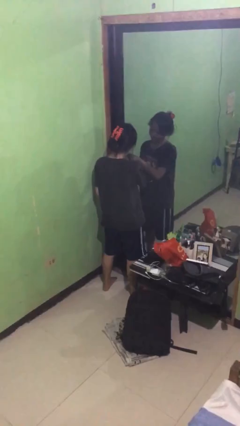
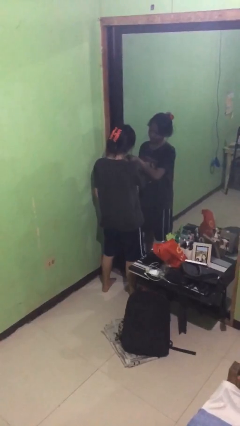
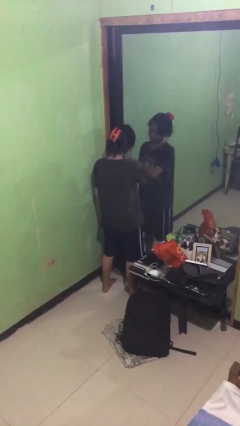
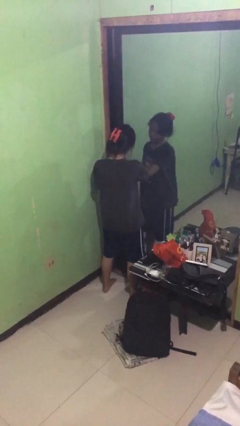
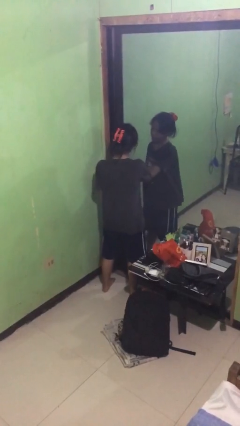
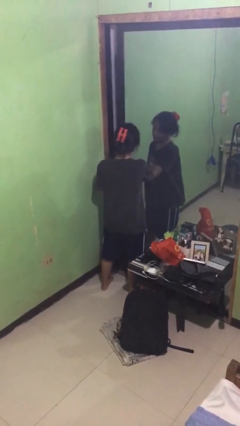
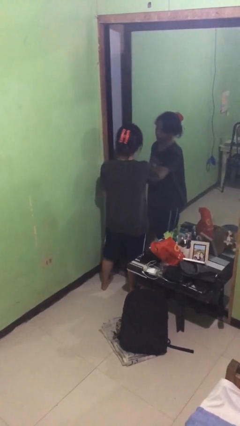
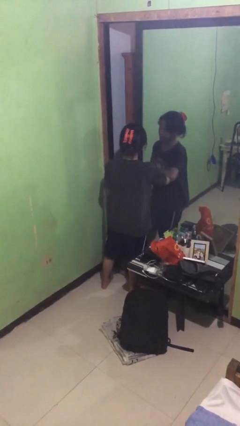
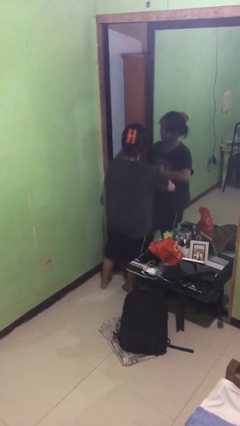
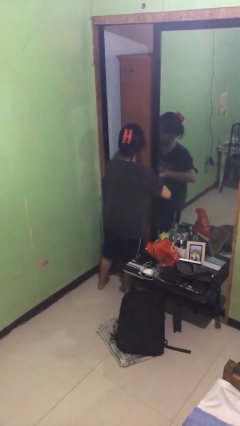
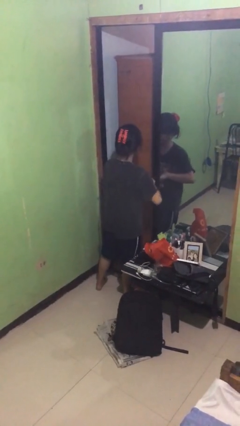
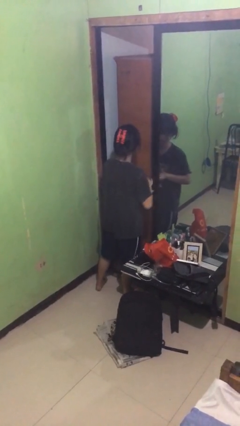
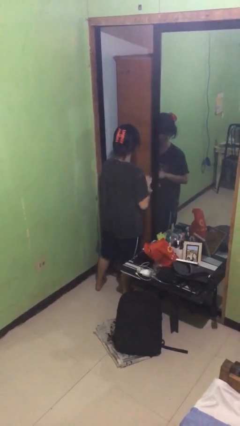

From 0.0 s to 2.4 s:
person opens sliding door

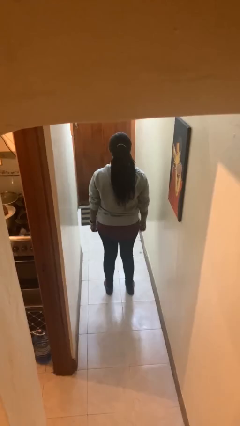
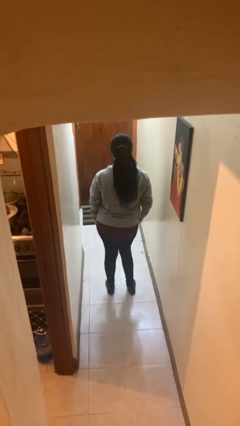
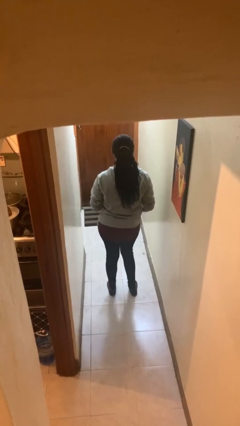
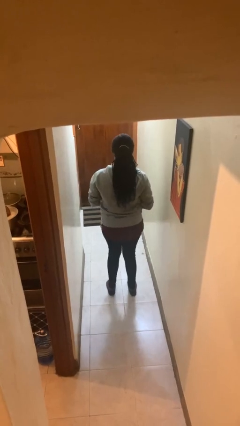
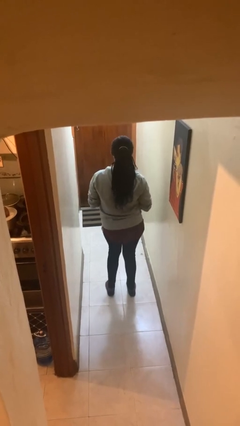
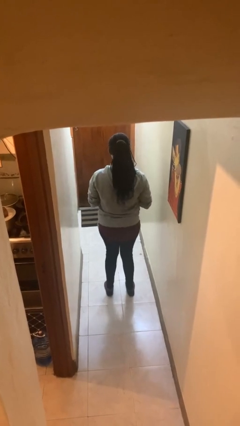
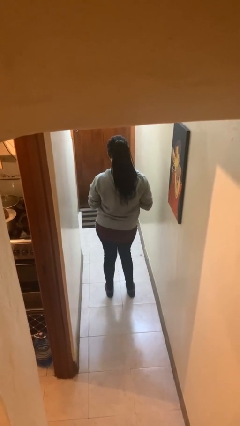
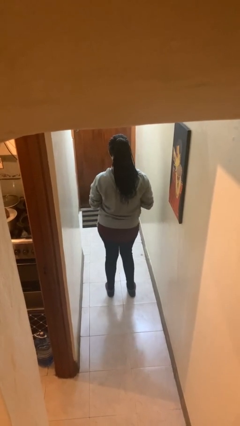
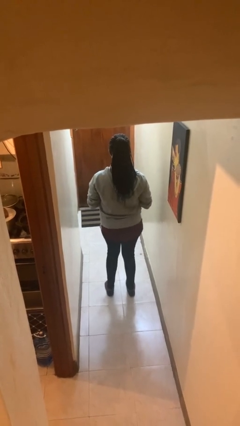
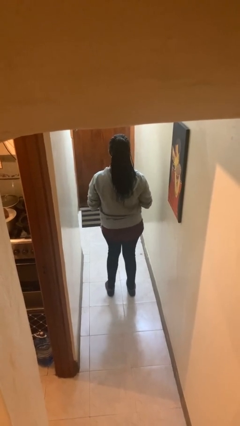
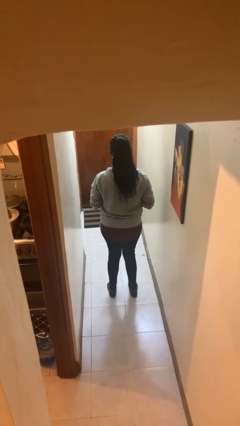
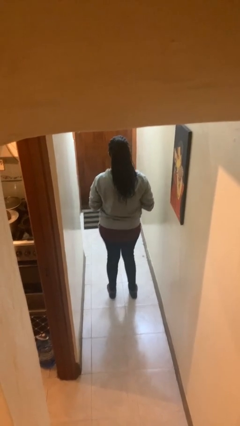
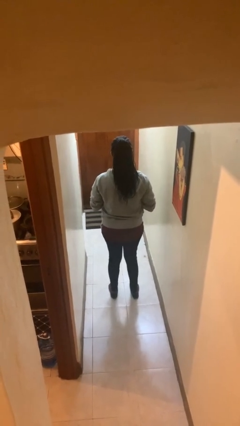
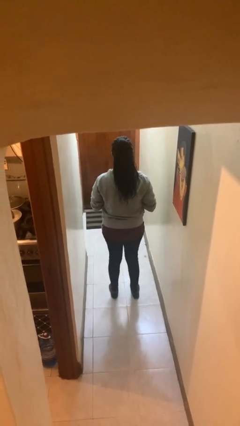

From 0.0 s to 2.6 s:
person wiggles hips

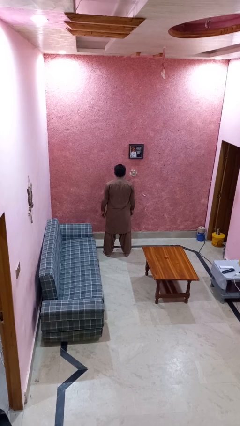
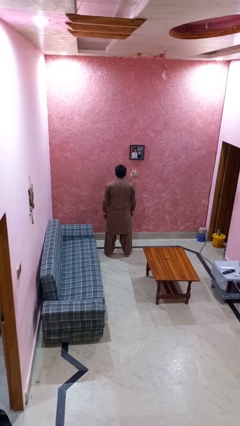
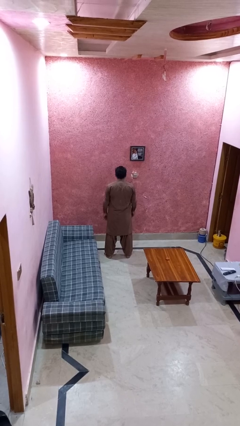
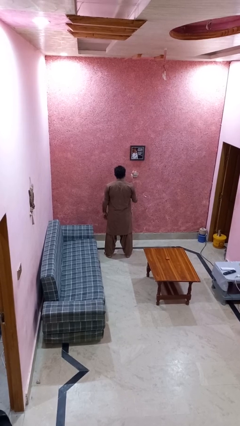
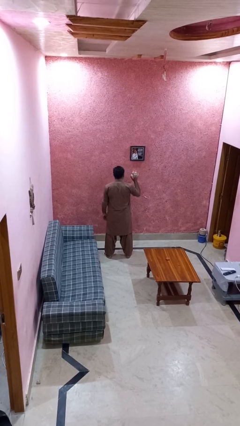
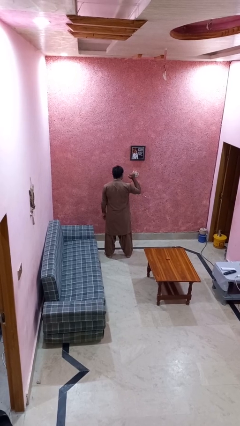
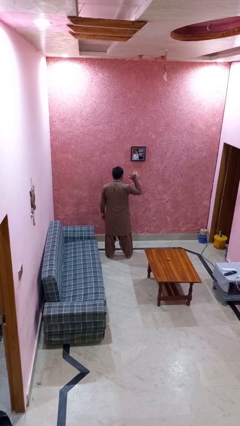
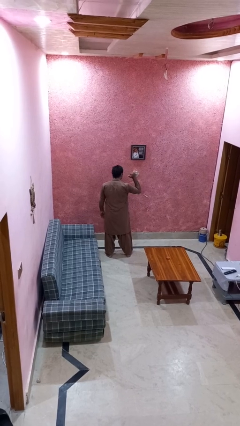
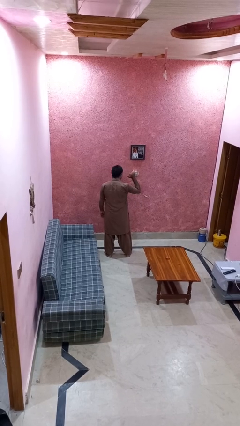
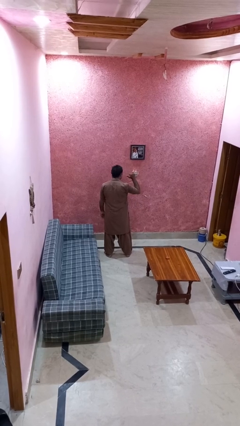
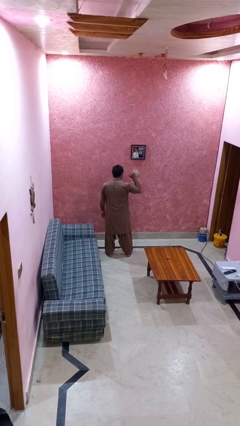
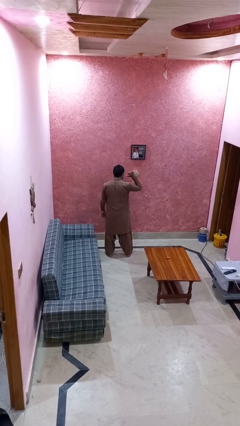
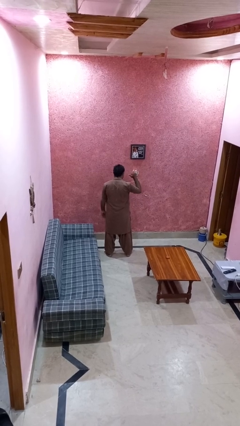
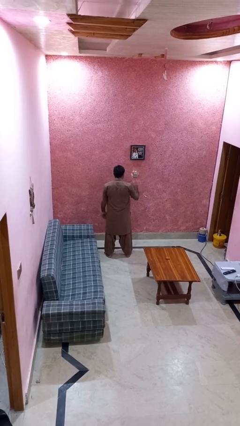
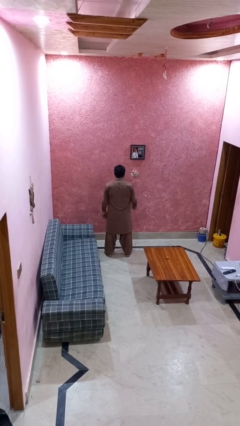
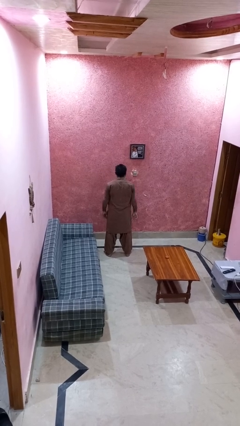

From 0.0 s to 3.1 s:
person gestures behind me

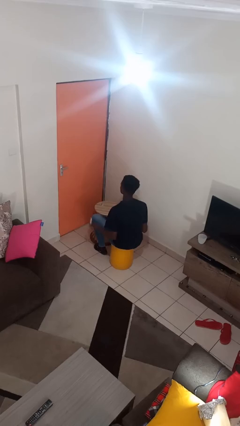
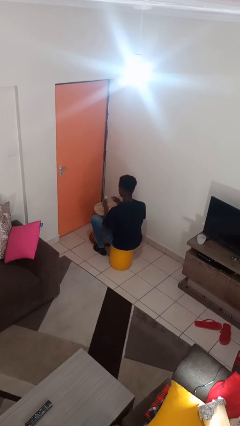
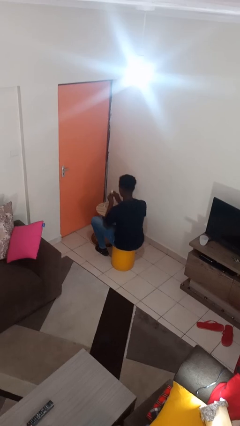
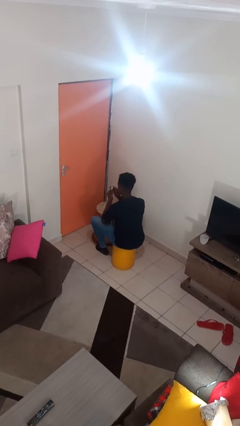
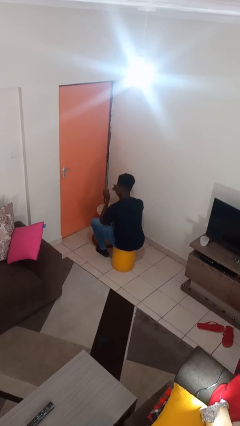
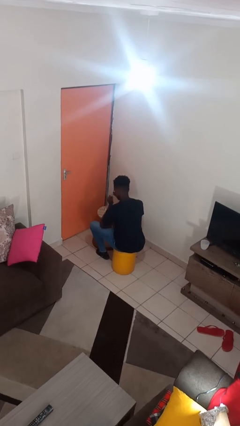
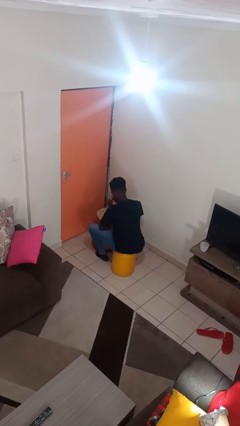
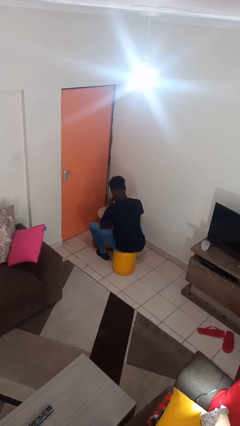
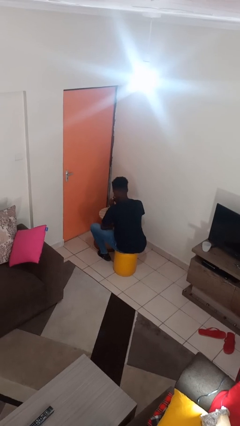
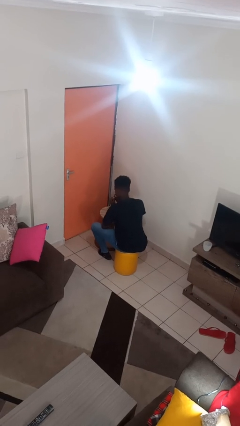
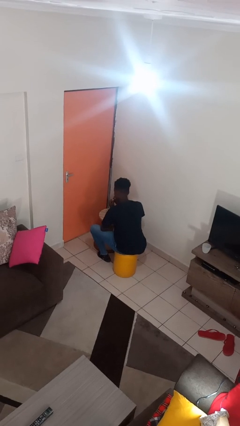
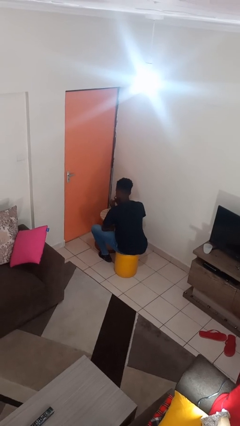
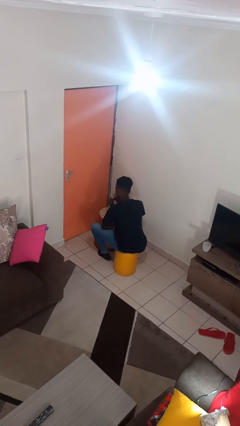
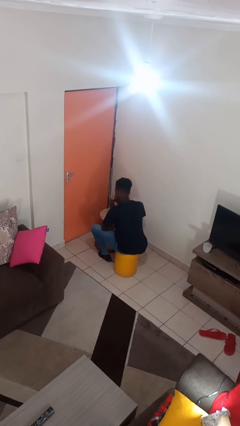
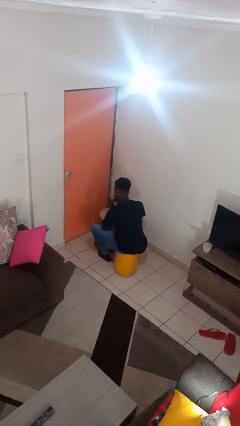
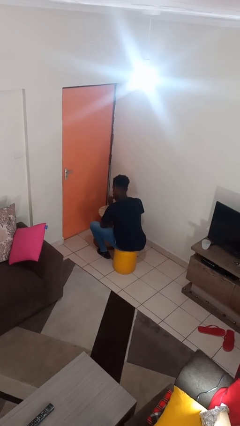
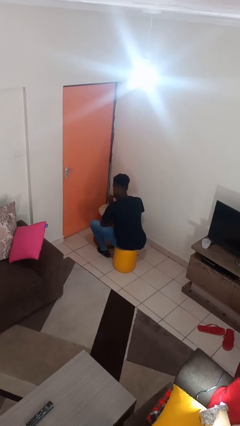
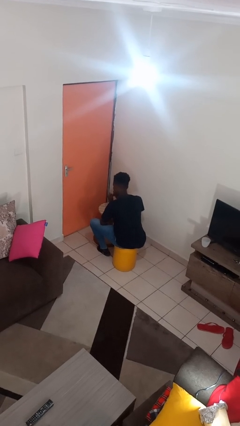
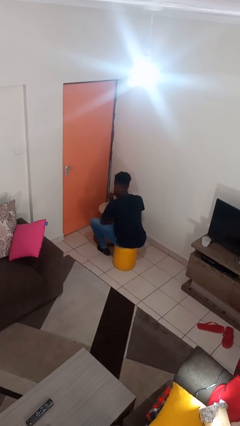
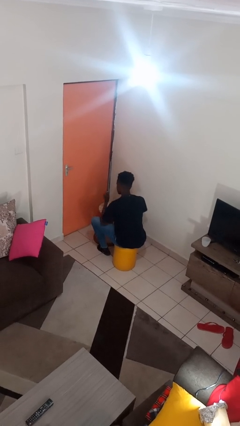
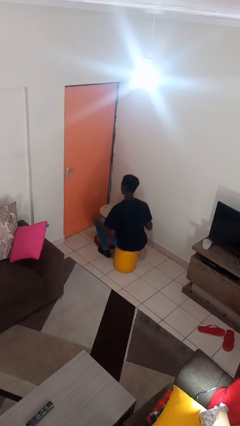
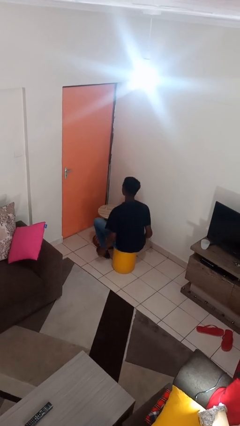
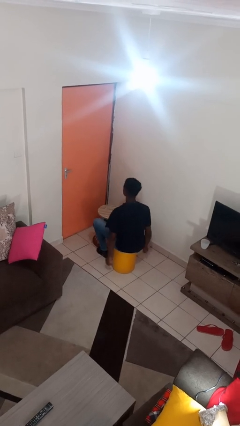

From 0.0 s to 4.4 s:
person paints fingernails

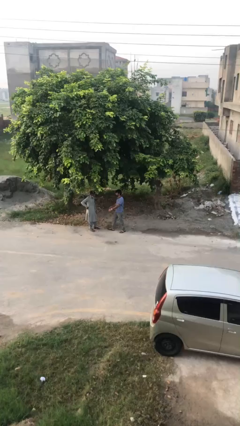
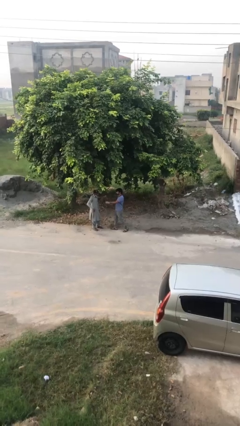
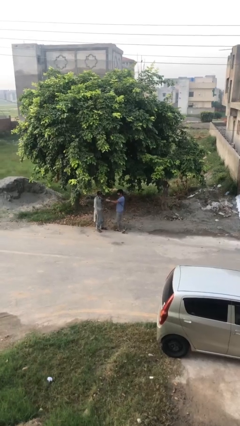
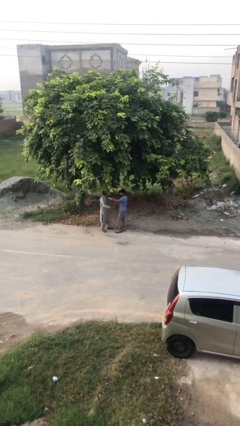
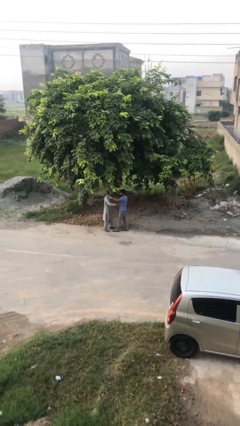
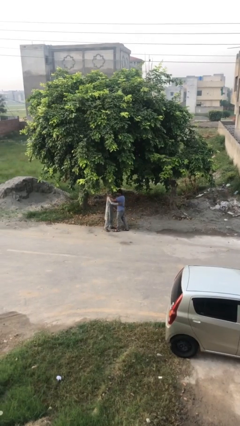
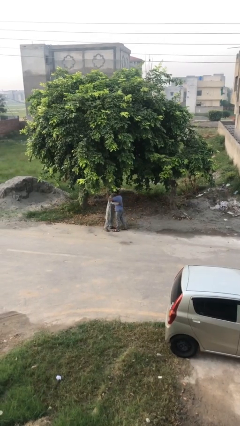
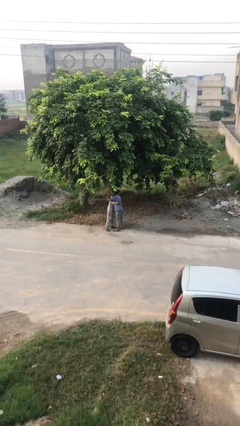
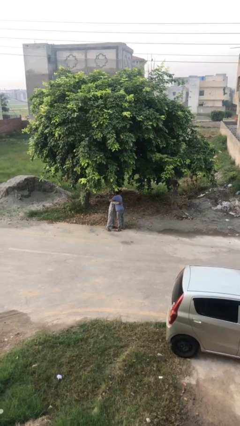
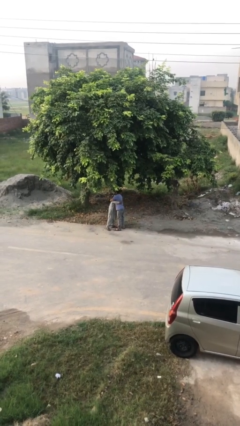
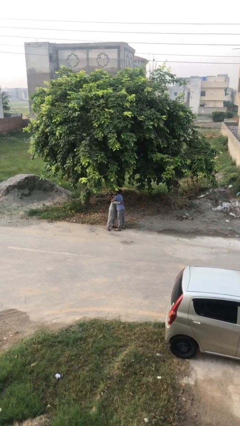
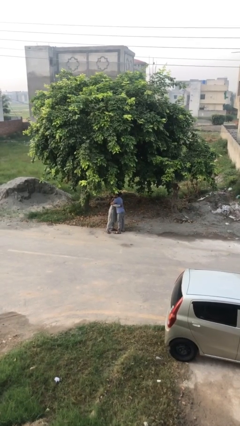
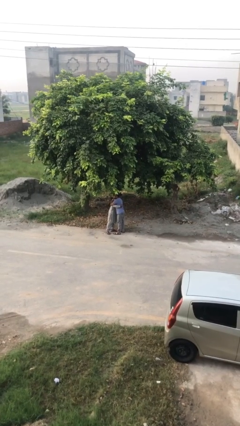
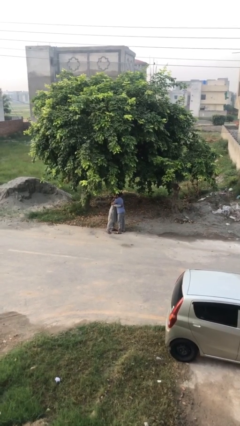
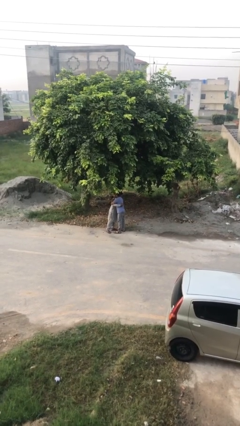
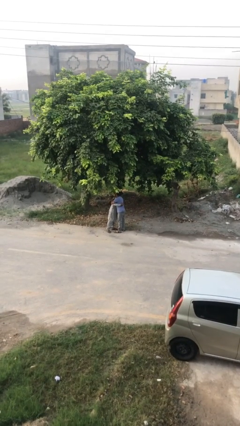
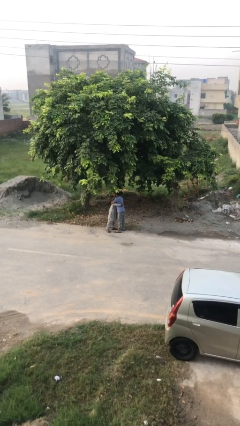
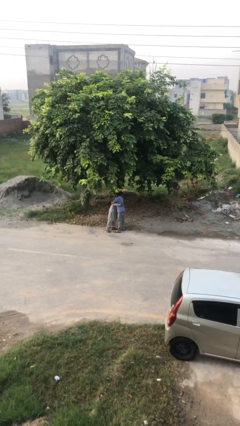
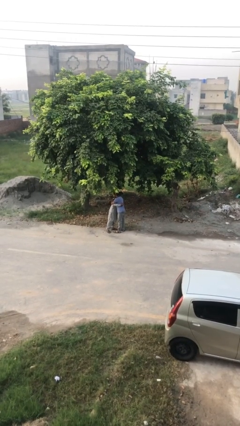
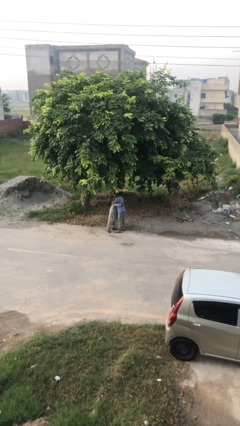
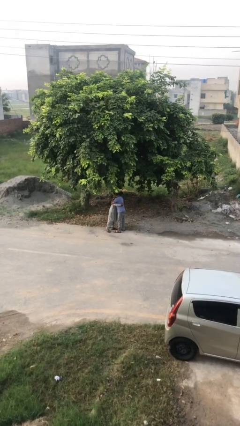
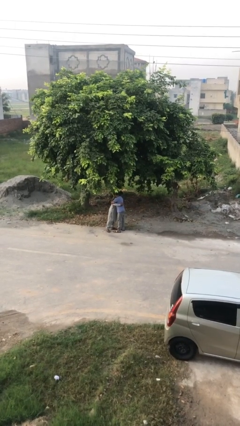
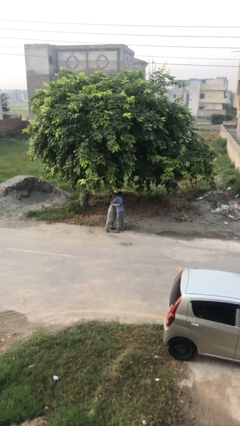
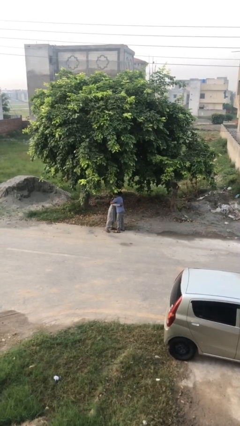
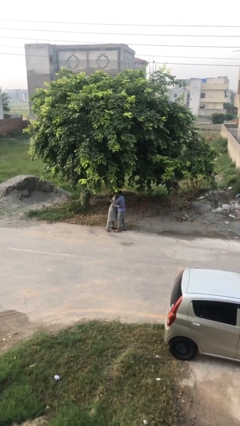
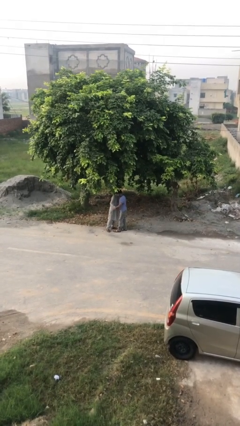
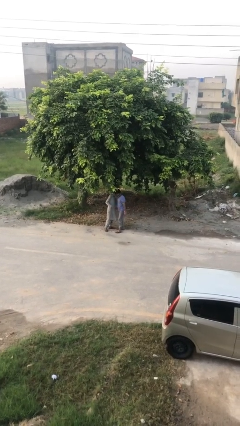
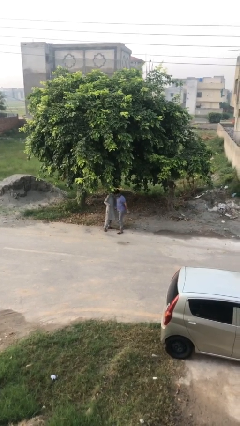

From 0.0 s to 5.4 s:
person embraces person
